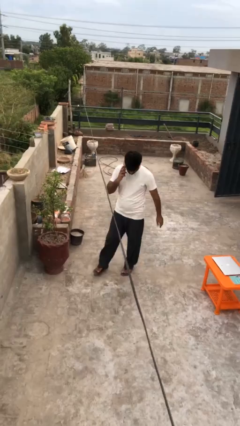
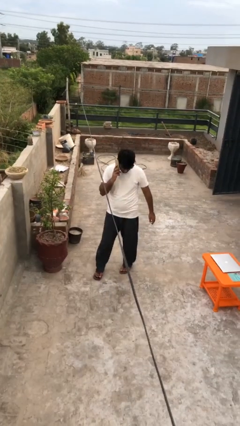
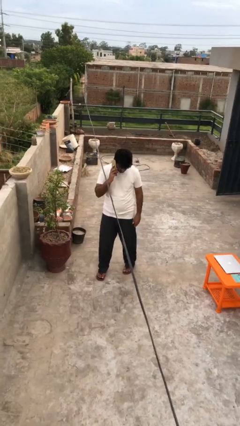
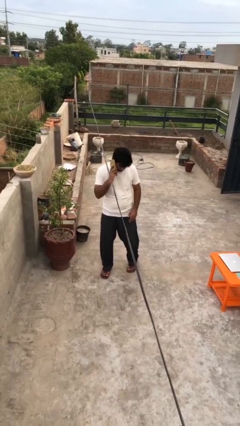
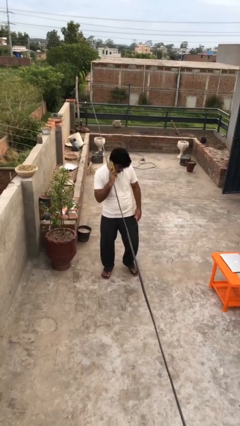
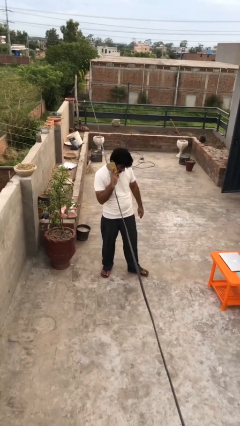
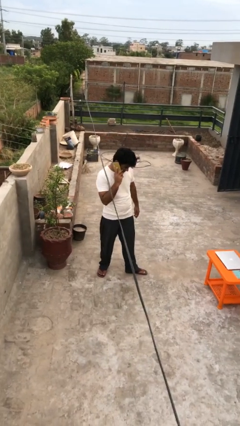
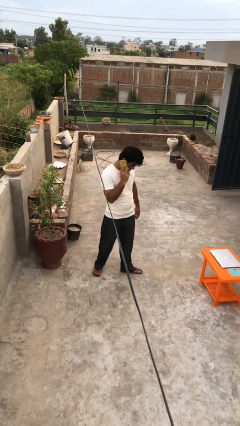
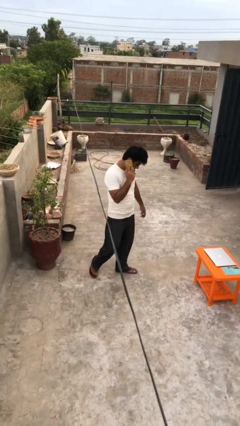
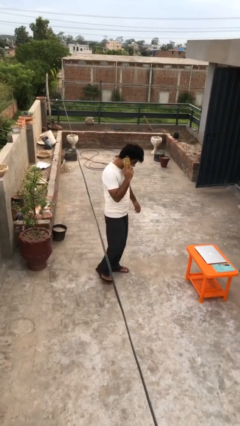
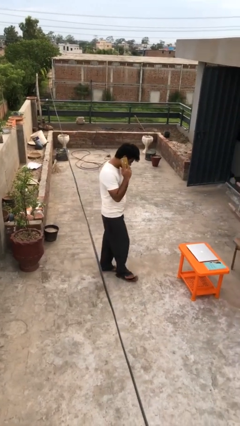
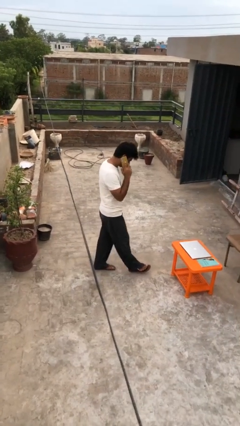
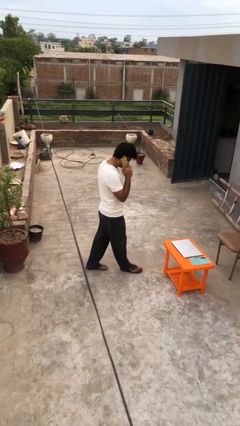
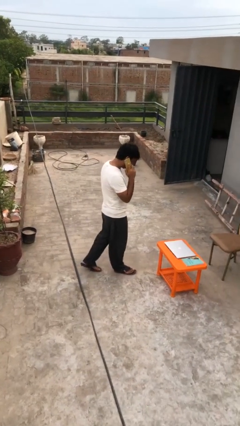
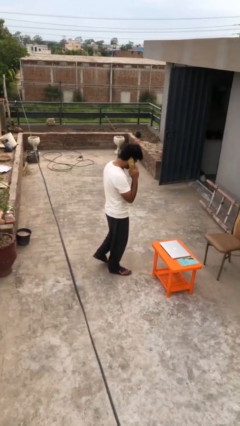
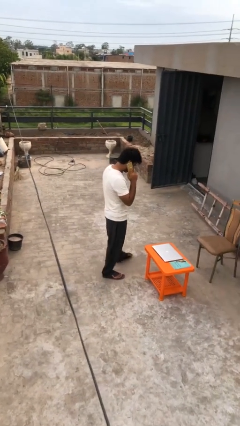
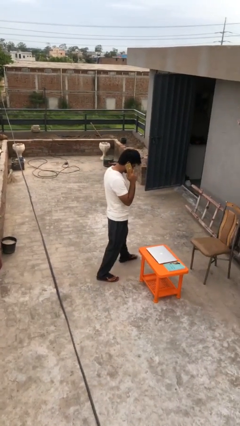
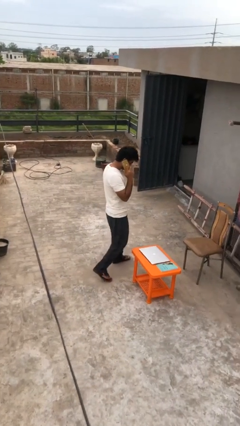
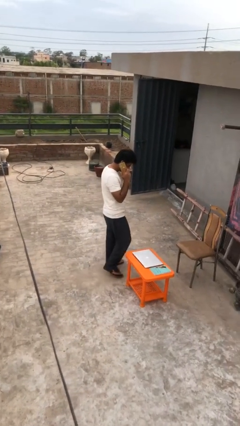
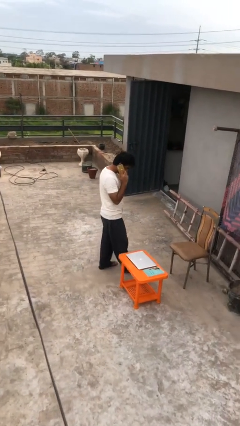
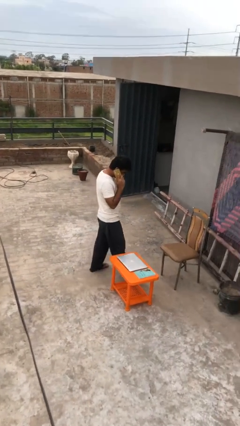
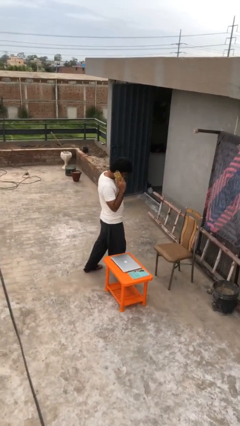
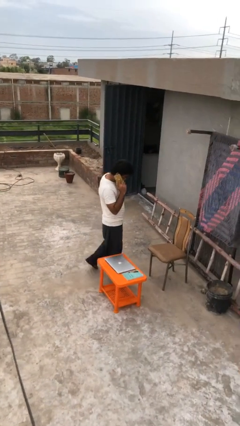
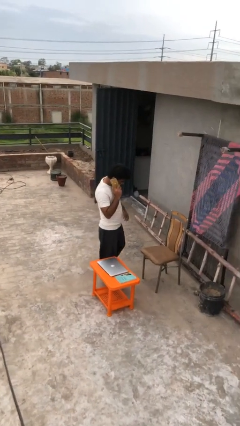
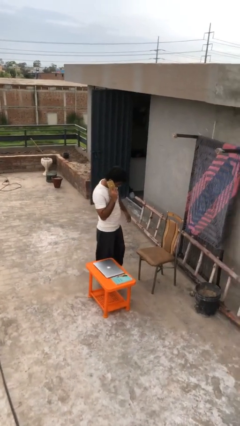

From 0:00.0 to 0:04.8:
person talks on phone

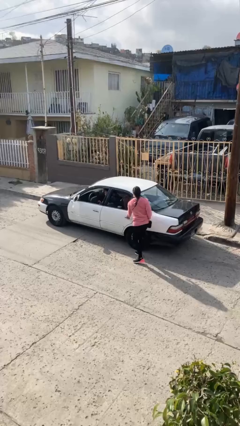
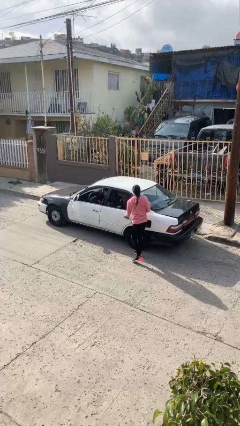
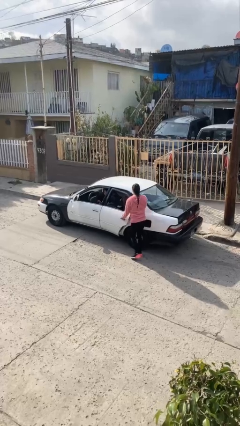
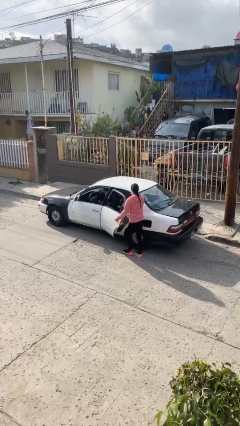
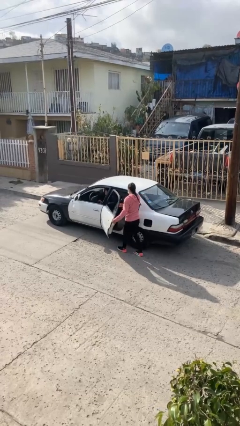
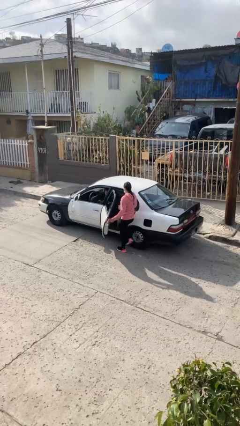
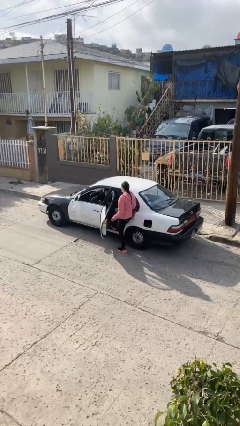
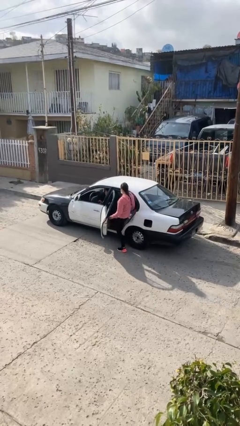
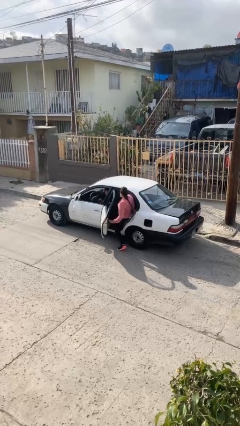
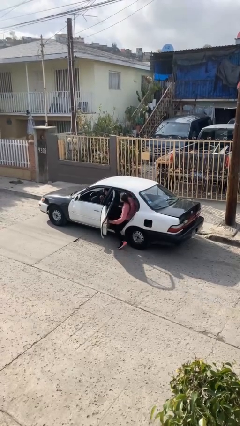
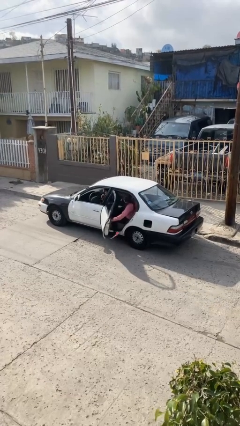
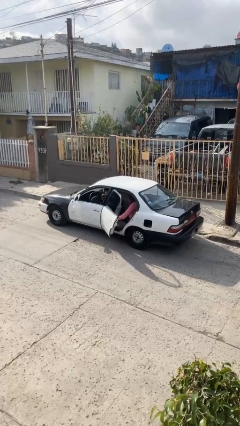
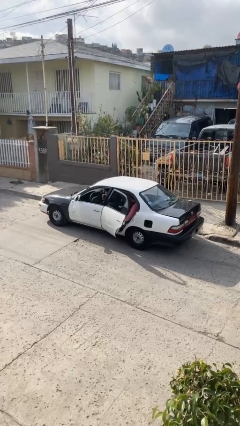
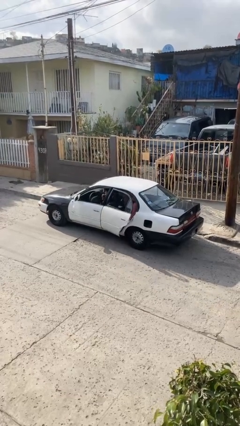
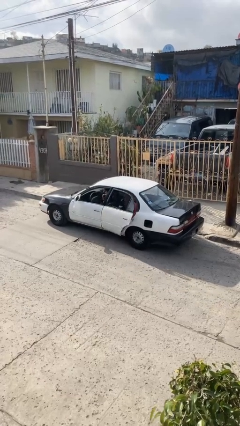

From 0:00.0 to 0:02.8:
car picks up person

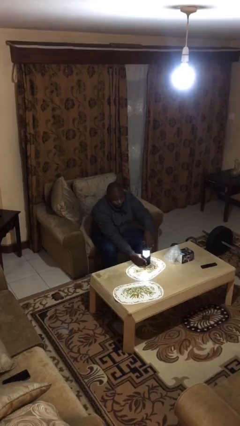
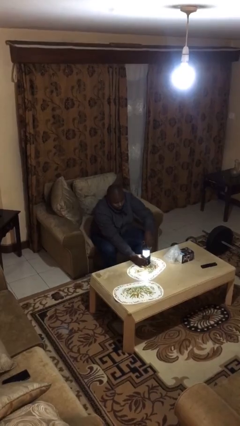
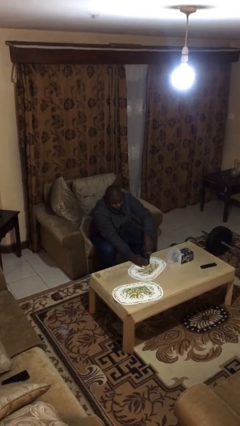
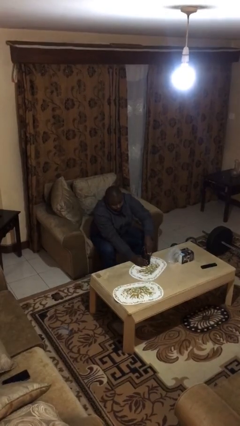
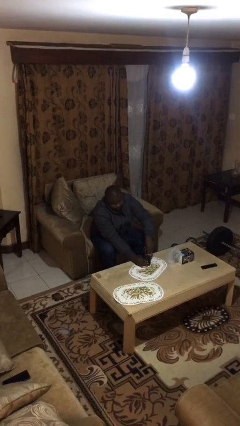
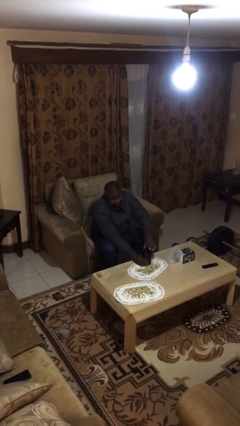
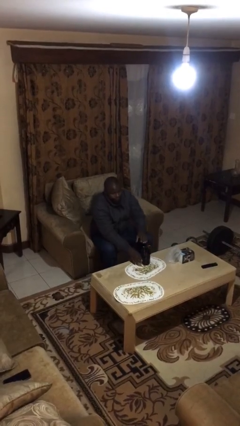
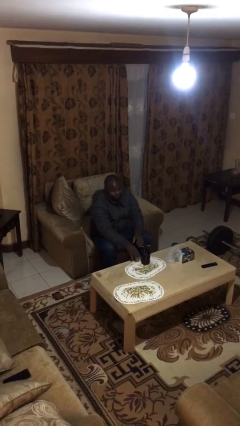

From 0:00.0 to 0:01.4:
person turns off lamp

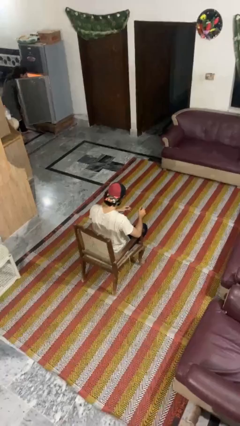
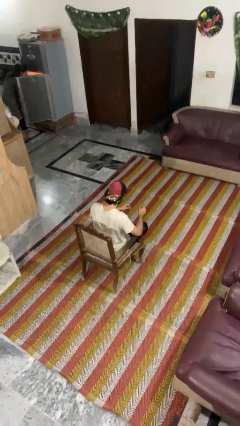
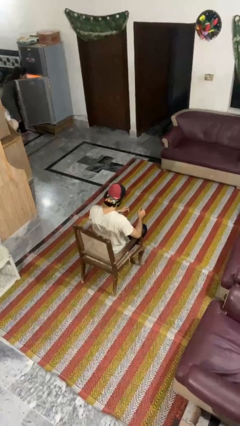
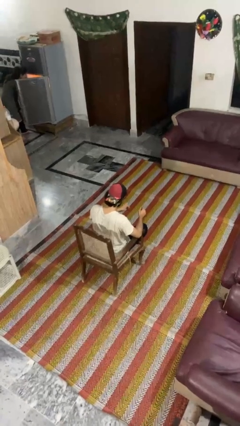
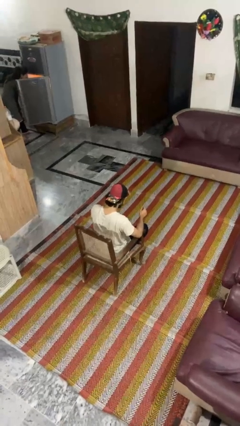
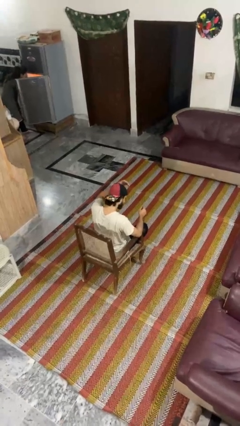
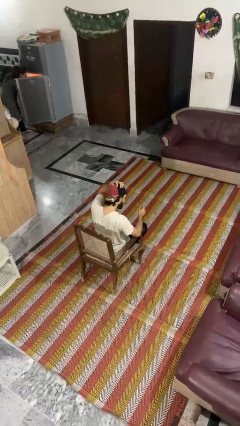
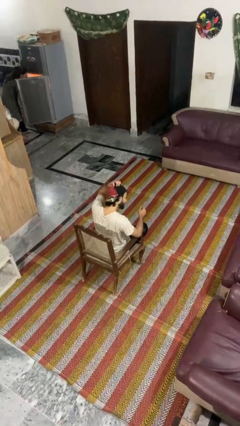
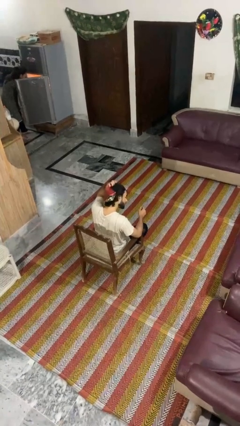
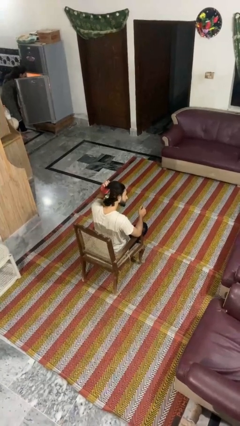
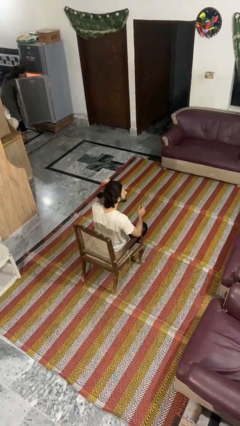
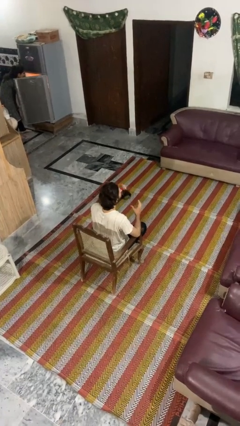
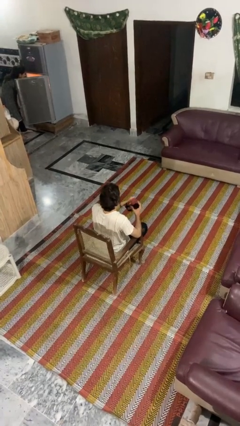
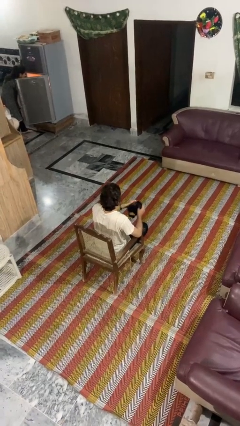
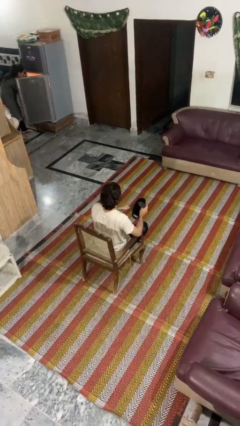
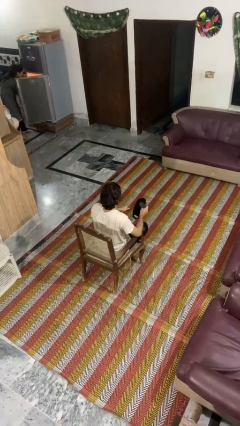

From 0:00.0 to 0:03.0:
person takes off hat

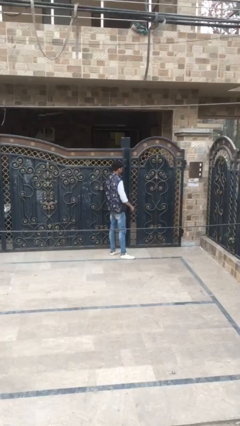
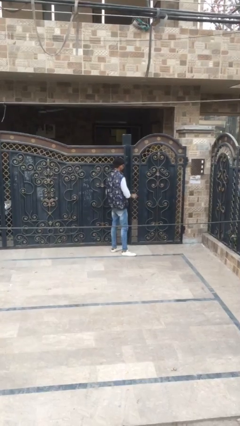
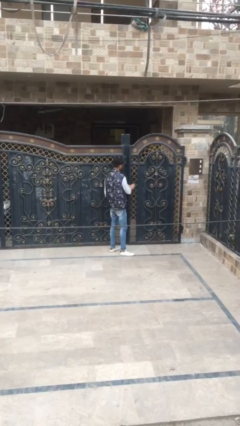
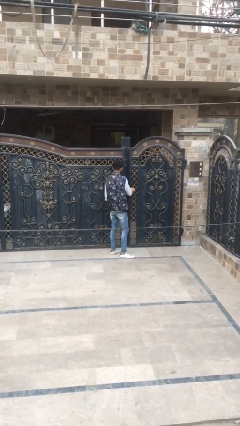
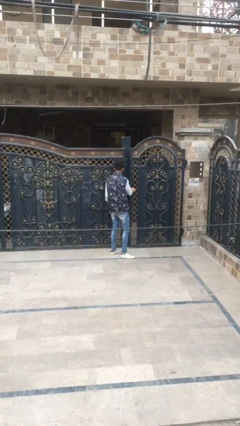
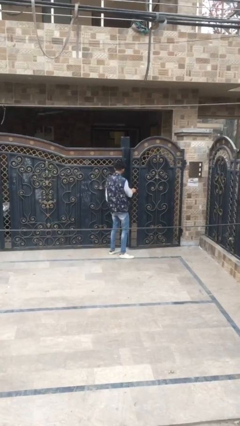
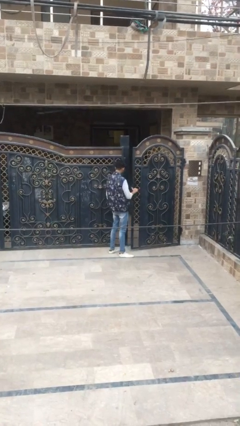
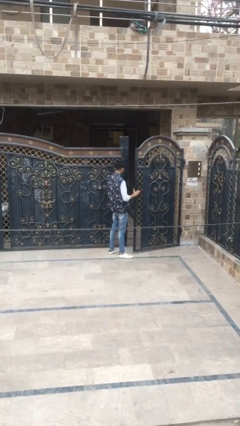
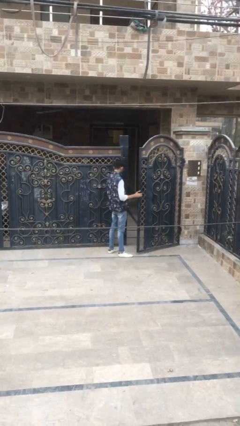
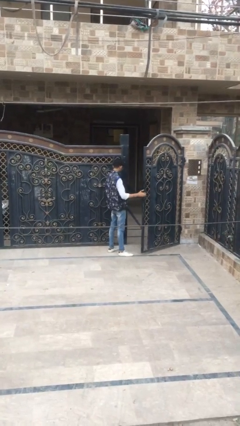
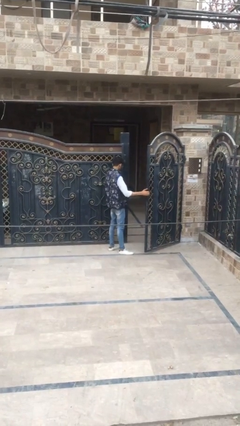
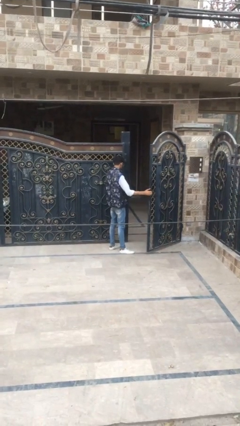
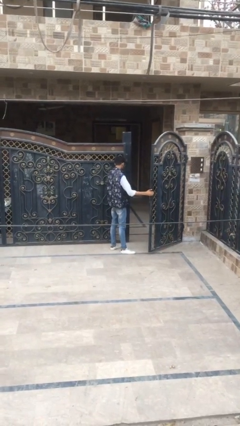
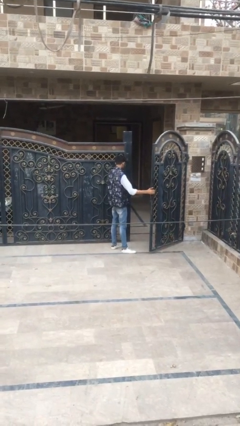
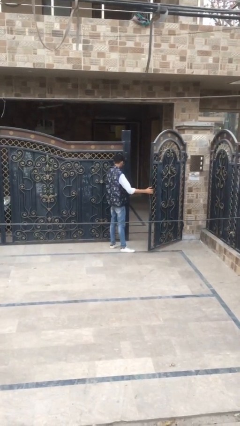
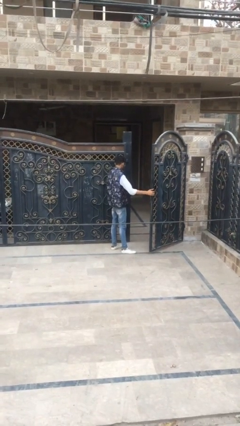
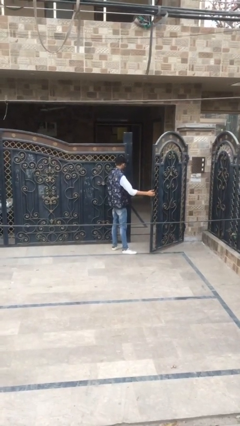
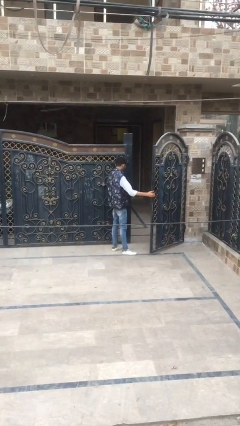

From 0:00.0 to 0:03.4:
person opens facility door

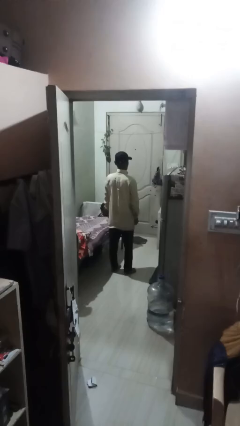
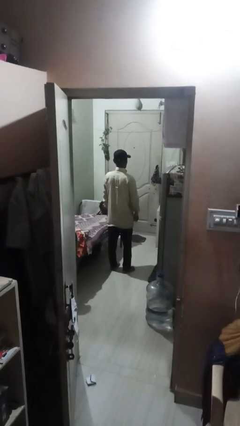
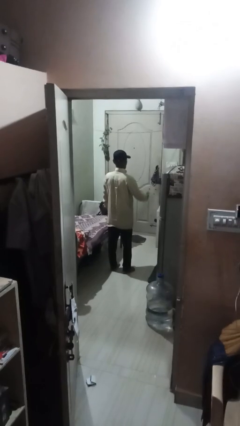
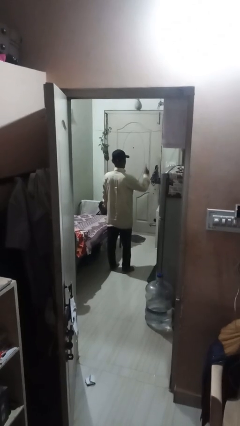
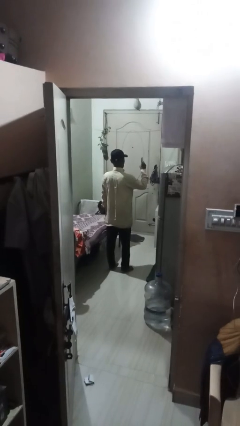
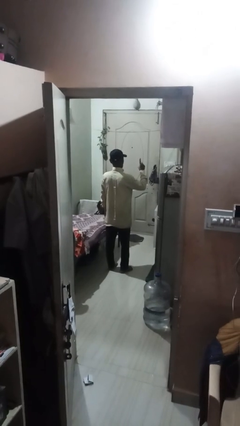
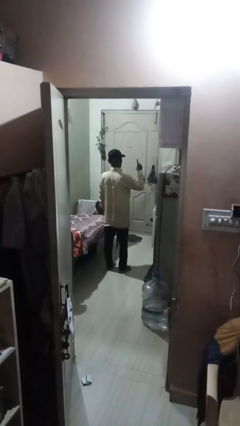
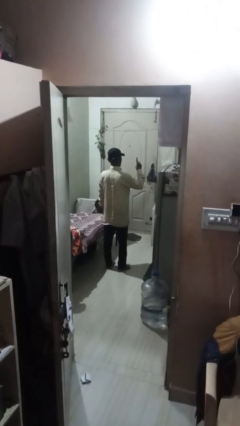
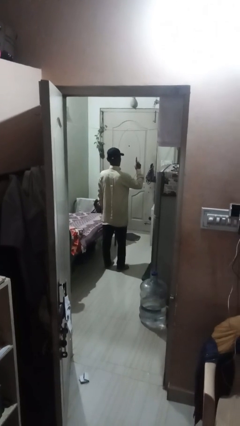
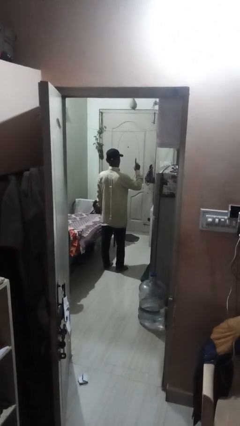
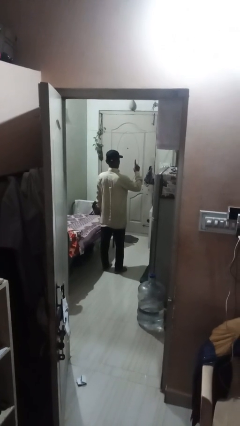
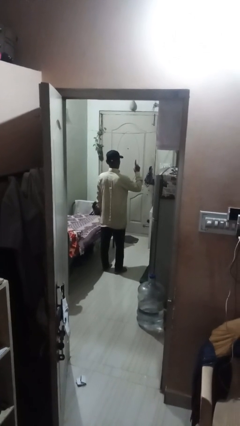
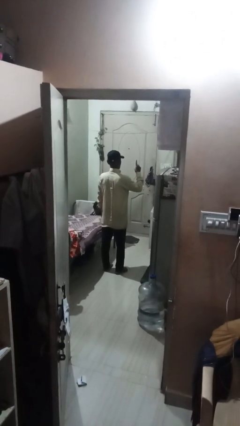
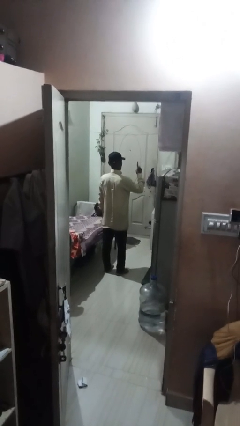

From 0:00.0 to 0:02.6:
person gestures number one
